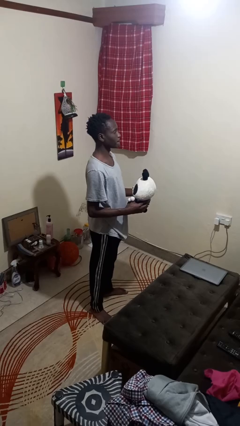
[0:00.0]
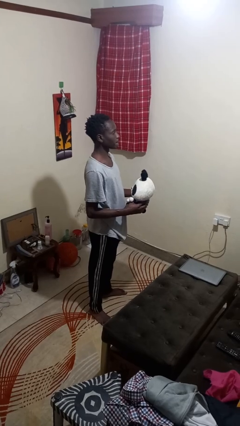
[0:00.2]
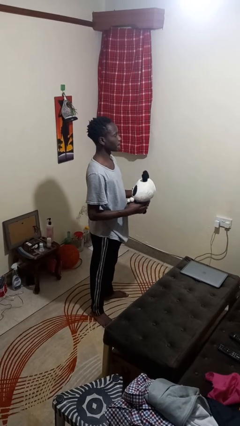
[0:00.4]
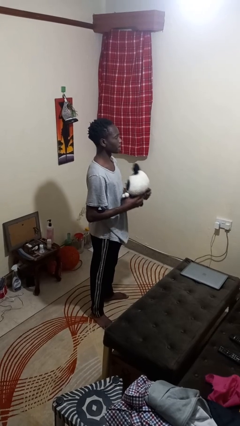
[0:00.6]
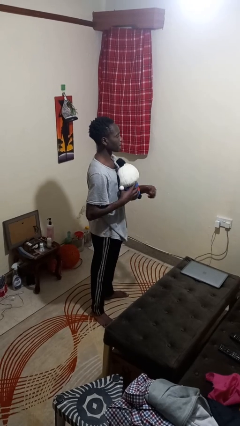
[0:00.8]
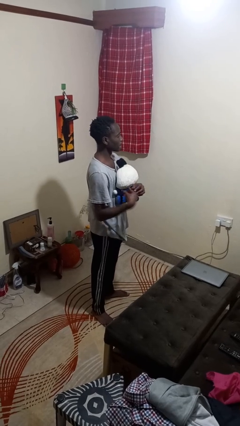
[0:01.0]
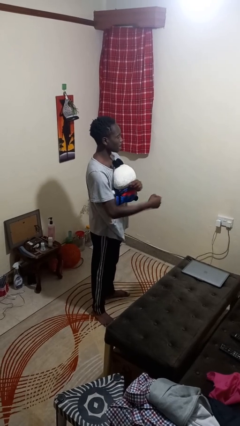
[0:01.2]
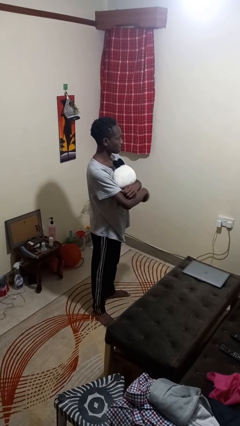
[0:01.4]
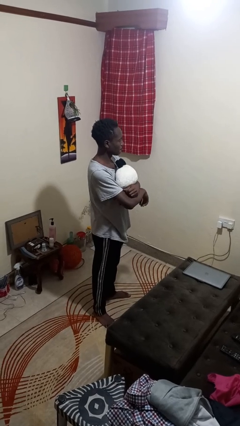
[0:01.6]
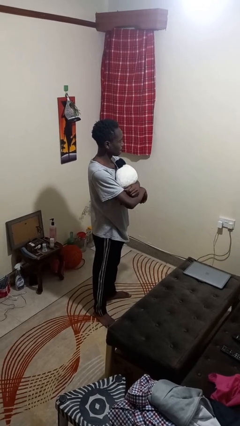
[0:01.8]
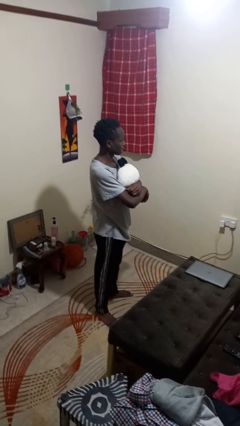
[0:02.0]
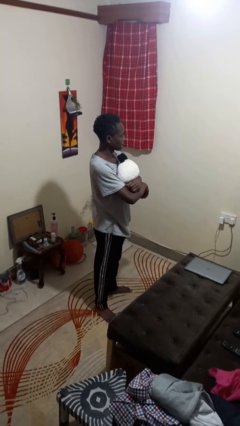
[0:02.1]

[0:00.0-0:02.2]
person hugs stuffed animal

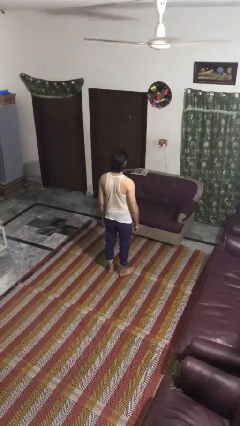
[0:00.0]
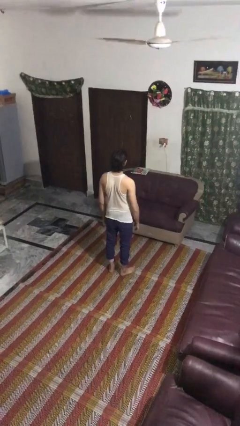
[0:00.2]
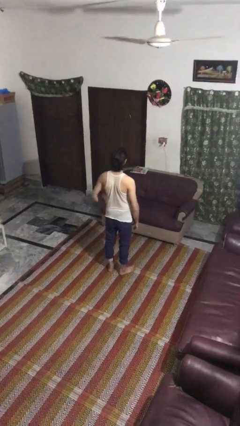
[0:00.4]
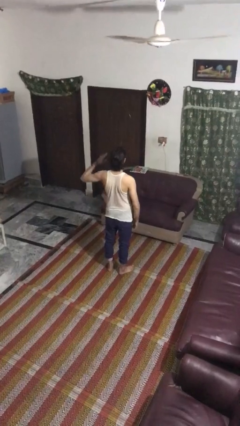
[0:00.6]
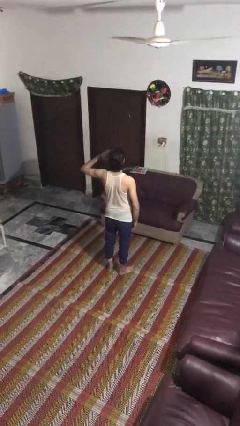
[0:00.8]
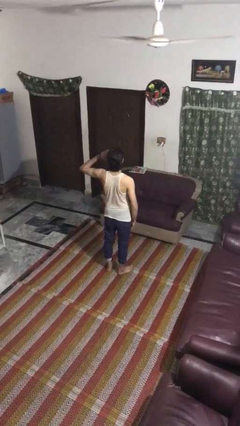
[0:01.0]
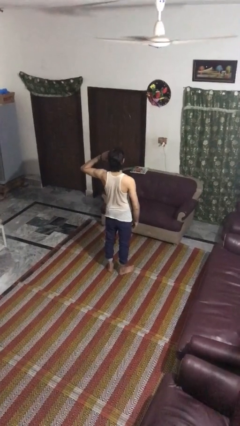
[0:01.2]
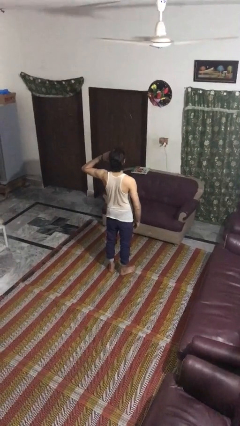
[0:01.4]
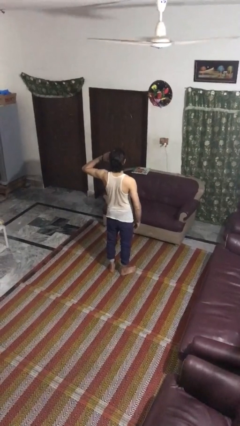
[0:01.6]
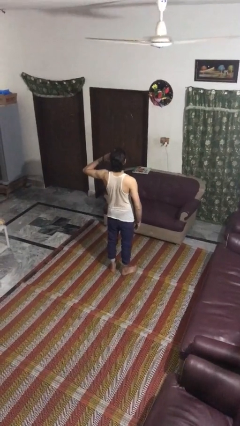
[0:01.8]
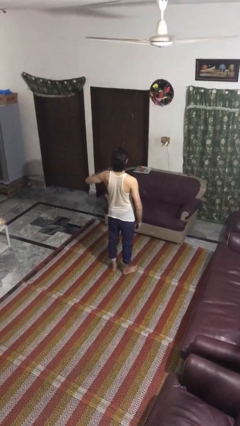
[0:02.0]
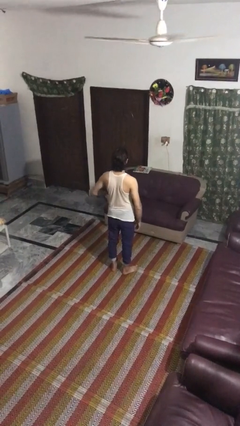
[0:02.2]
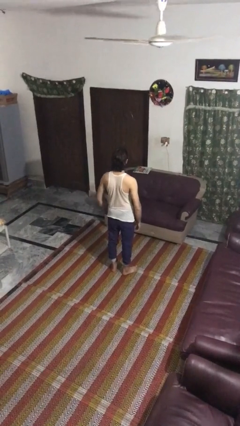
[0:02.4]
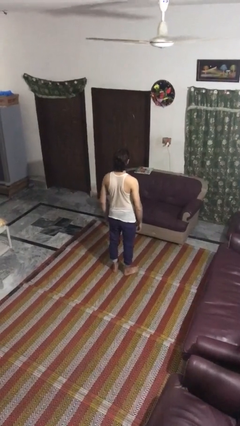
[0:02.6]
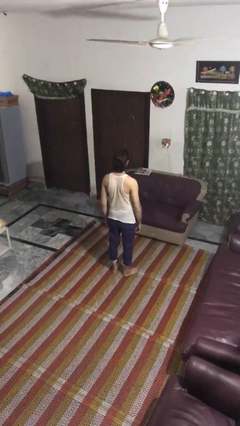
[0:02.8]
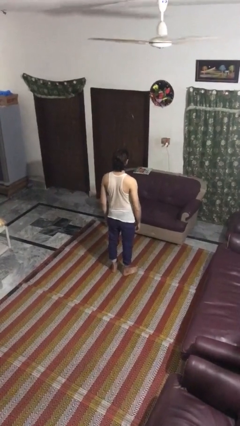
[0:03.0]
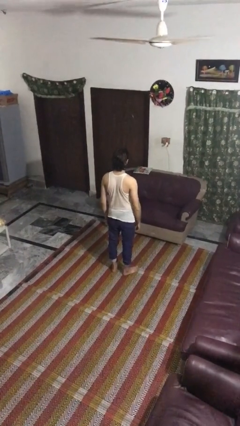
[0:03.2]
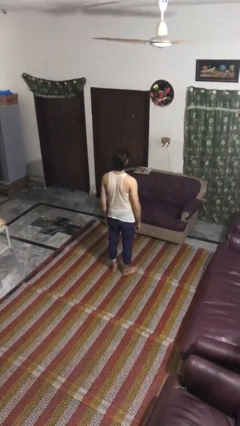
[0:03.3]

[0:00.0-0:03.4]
person salutes

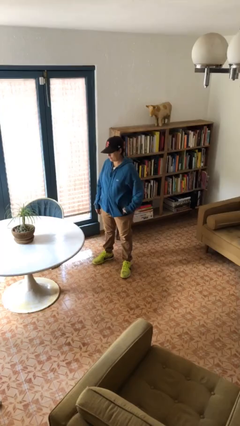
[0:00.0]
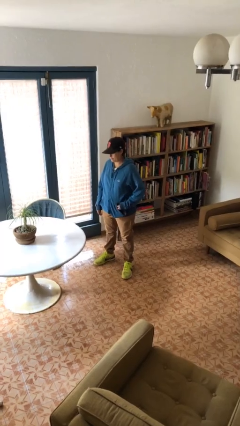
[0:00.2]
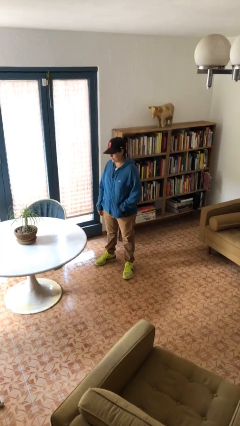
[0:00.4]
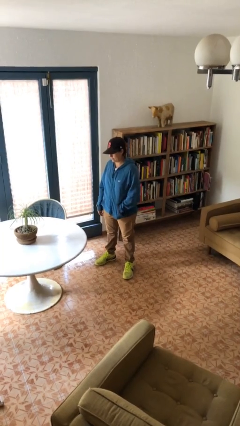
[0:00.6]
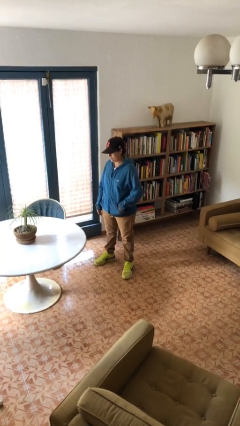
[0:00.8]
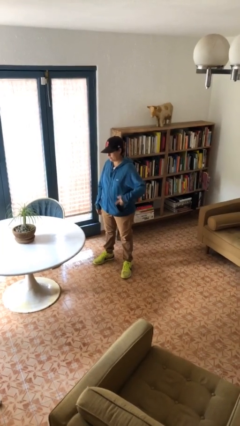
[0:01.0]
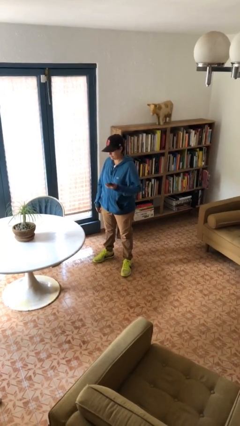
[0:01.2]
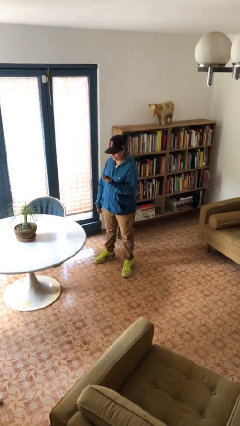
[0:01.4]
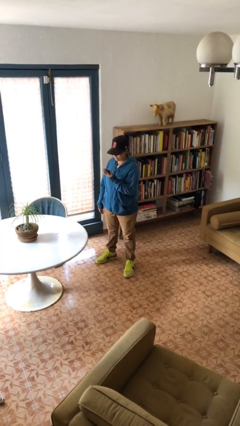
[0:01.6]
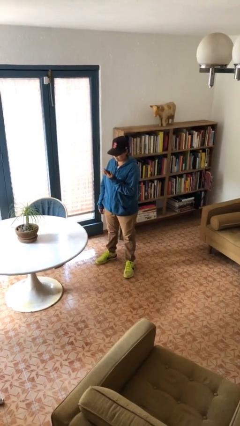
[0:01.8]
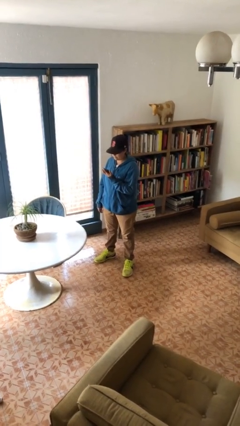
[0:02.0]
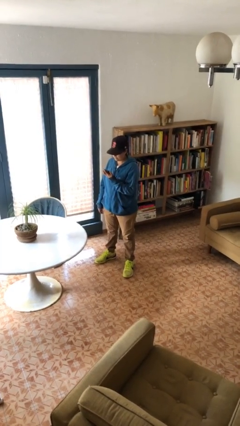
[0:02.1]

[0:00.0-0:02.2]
person takes phone from pocket

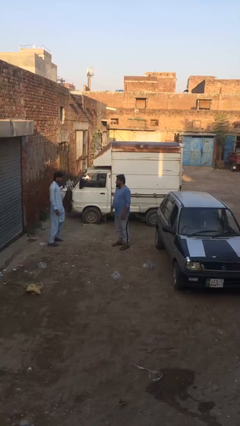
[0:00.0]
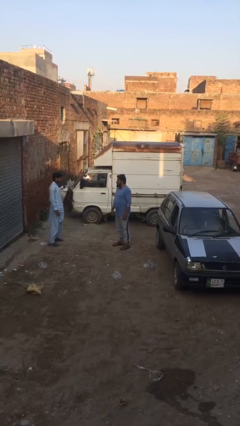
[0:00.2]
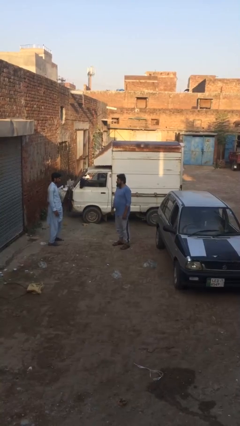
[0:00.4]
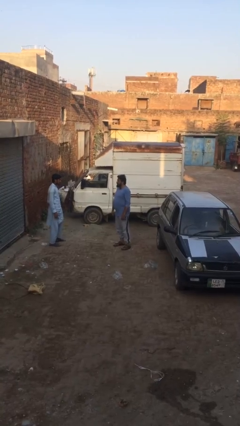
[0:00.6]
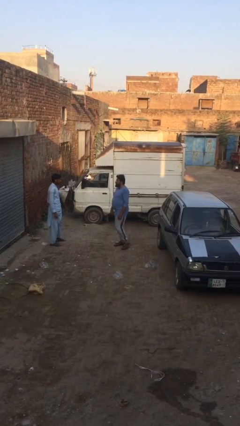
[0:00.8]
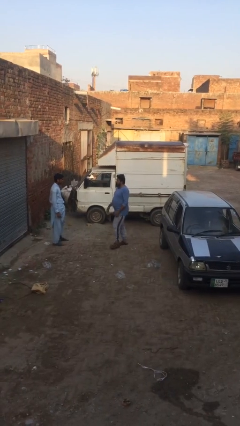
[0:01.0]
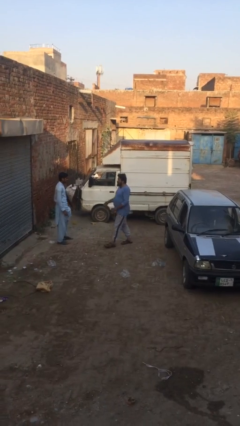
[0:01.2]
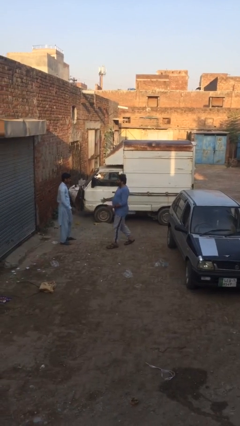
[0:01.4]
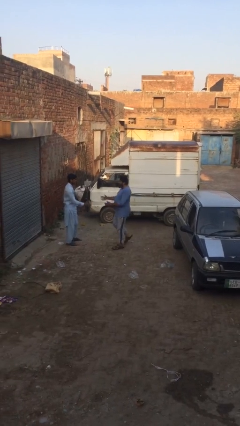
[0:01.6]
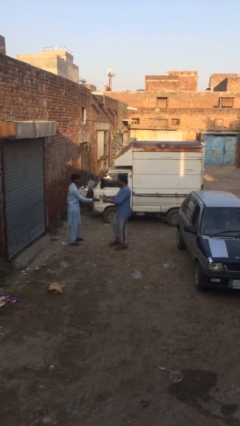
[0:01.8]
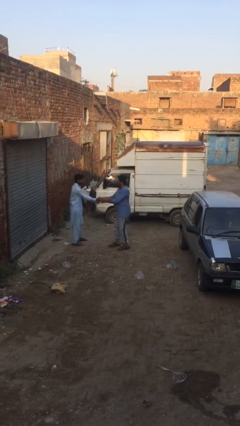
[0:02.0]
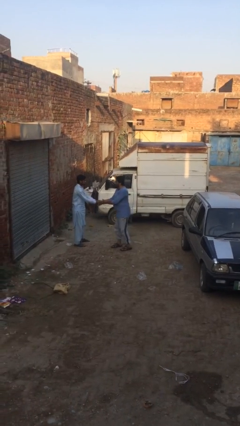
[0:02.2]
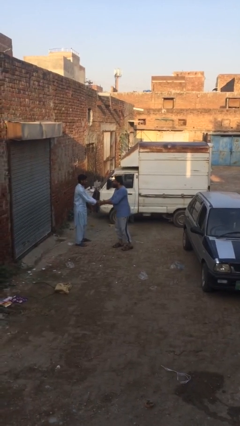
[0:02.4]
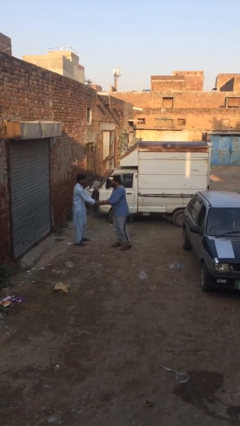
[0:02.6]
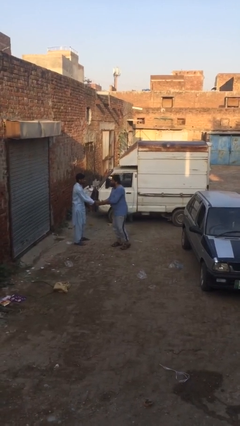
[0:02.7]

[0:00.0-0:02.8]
person shakes hand

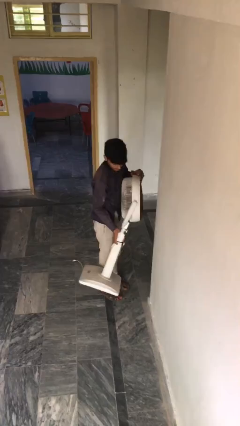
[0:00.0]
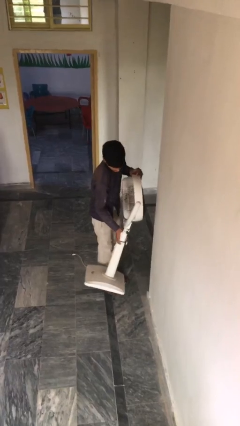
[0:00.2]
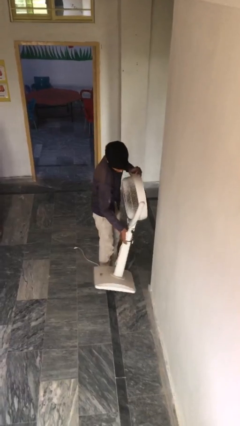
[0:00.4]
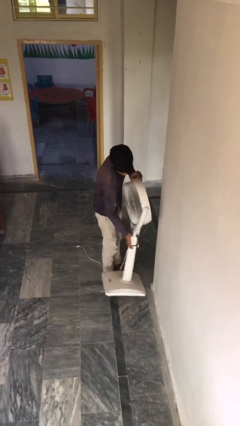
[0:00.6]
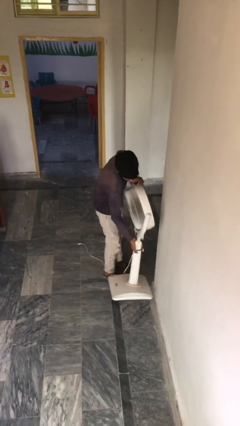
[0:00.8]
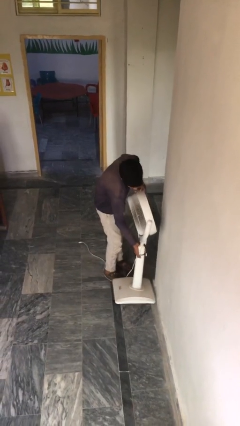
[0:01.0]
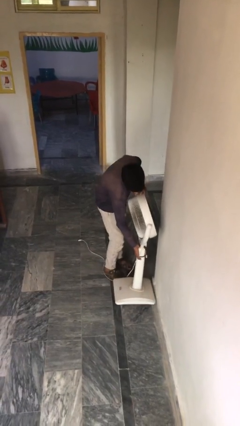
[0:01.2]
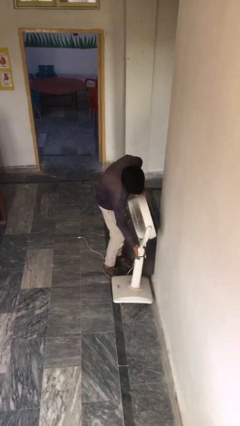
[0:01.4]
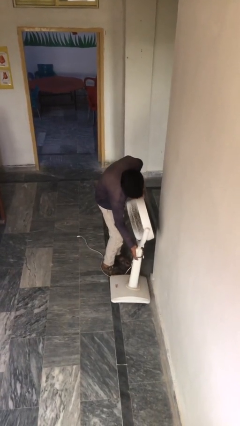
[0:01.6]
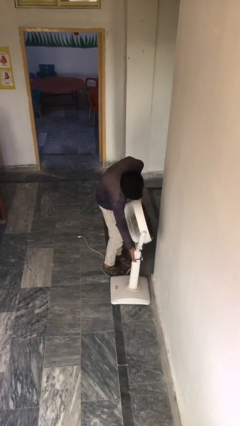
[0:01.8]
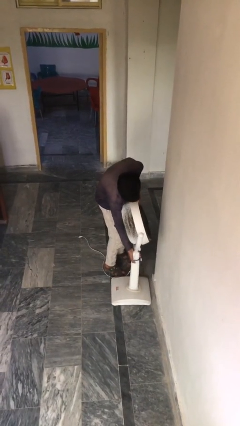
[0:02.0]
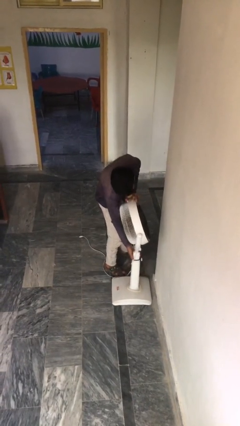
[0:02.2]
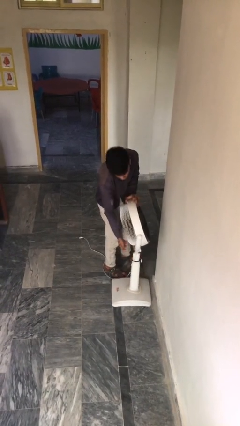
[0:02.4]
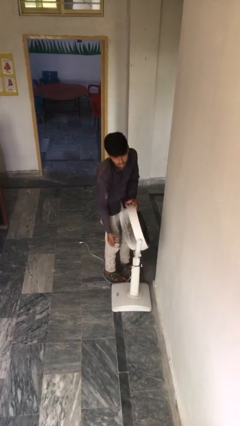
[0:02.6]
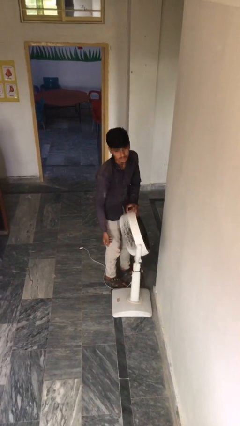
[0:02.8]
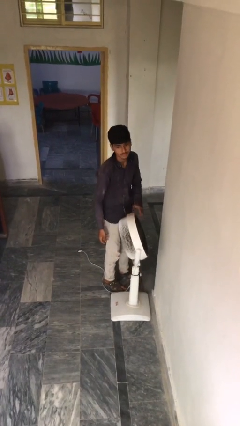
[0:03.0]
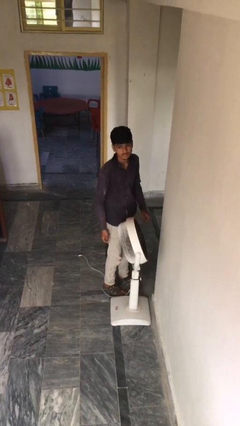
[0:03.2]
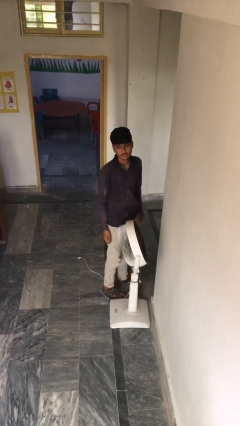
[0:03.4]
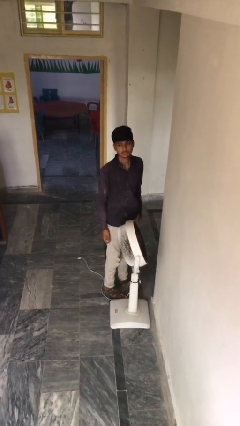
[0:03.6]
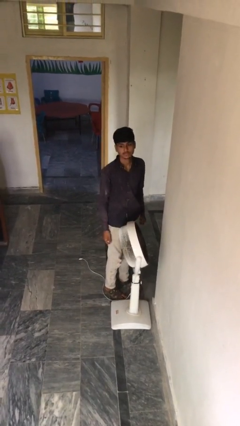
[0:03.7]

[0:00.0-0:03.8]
person puts down object on floor

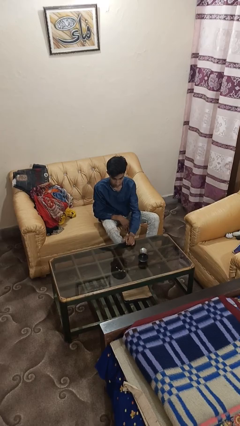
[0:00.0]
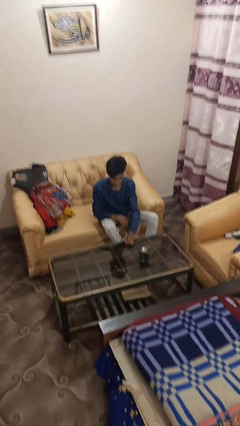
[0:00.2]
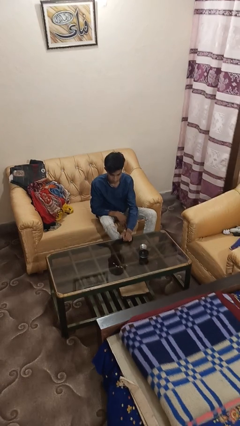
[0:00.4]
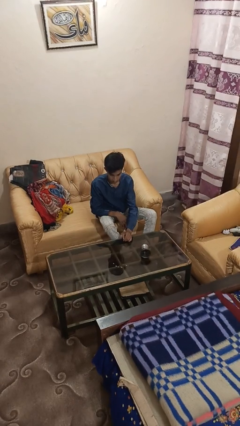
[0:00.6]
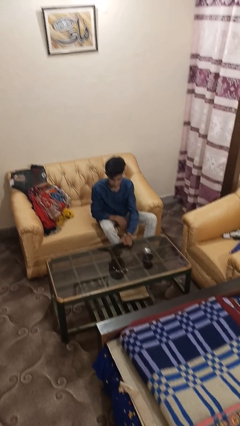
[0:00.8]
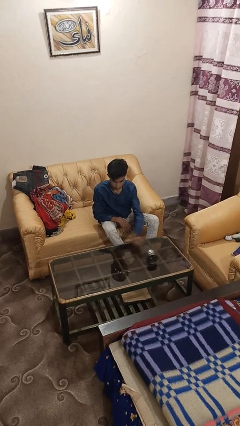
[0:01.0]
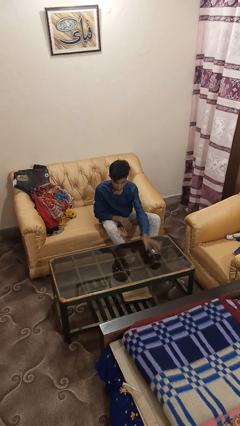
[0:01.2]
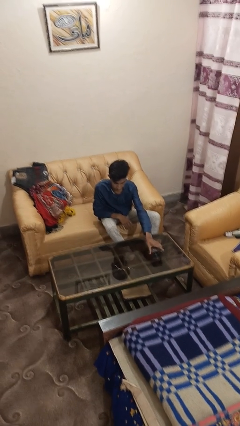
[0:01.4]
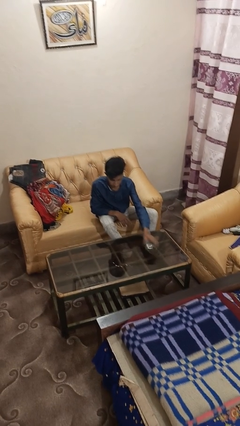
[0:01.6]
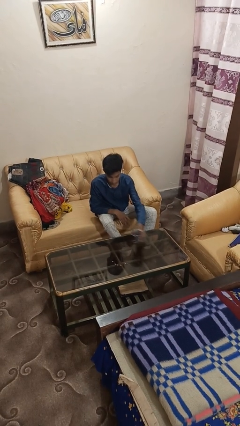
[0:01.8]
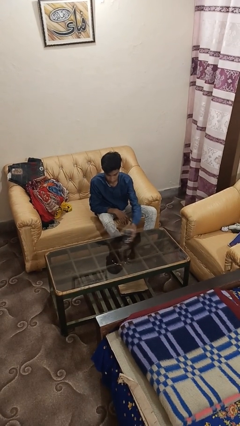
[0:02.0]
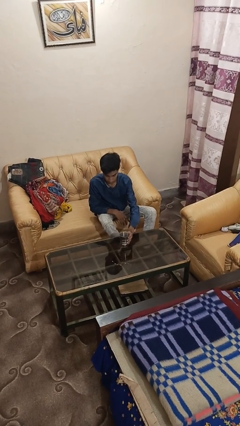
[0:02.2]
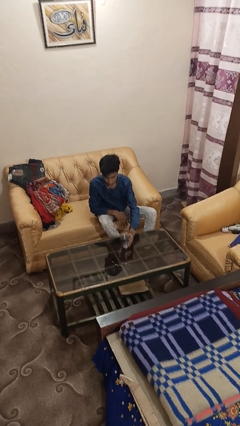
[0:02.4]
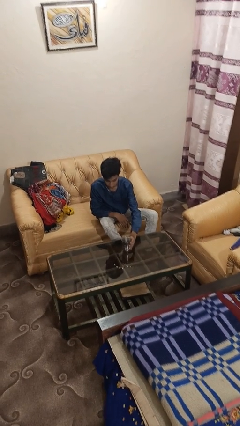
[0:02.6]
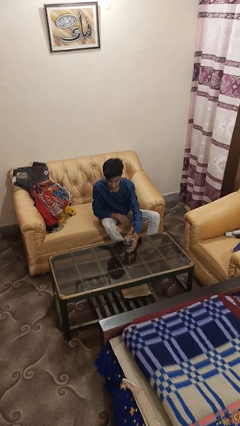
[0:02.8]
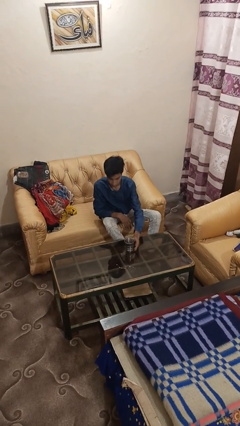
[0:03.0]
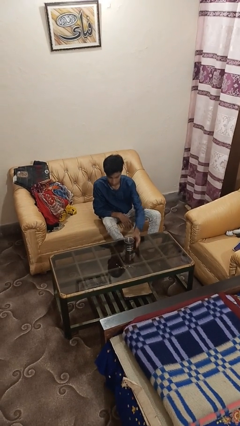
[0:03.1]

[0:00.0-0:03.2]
person sets upright glass
